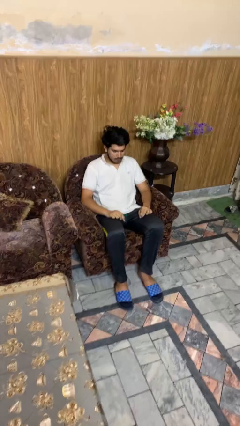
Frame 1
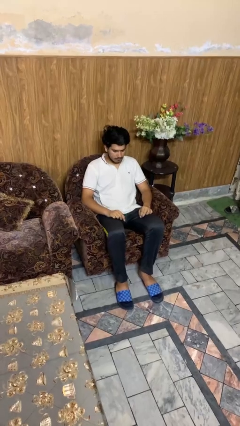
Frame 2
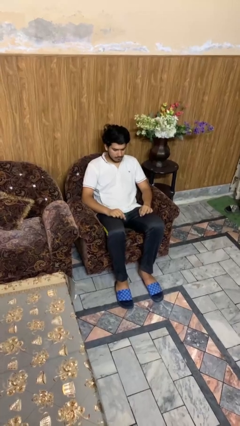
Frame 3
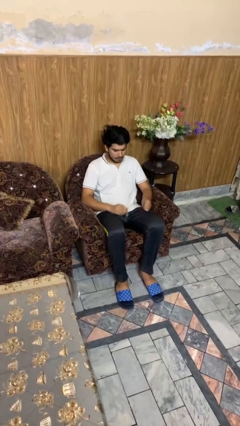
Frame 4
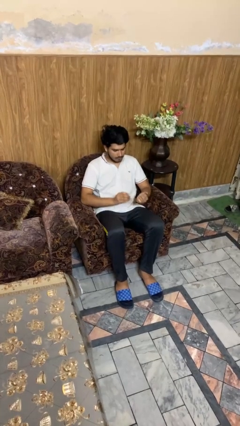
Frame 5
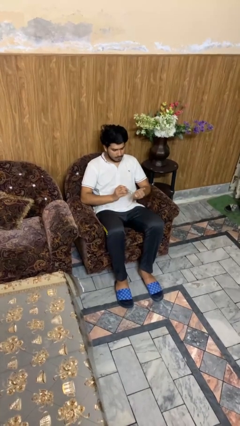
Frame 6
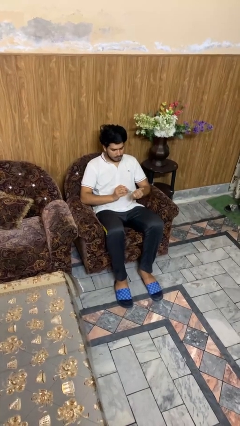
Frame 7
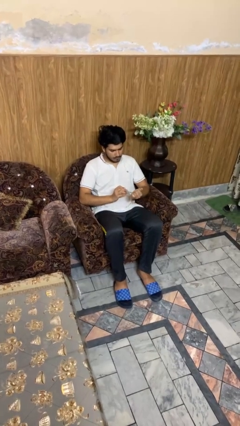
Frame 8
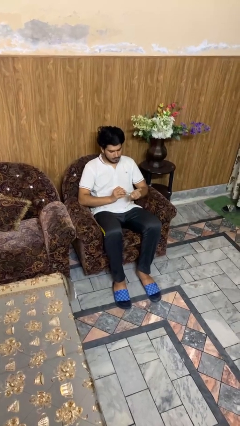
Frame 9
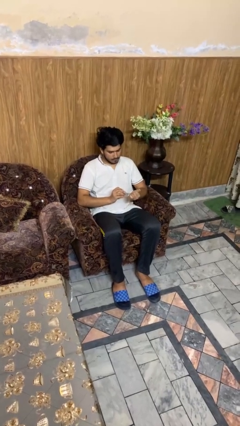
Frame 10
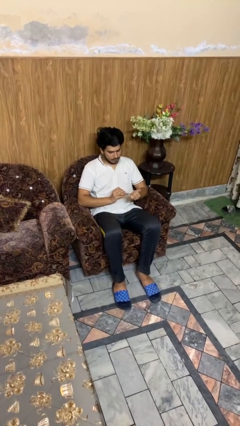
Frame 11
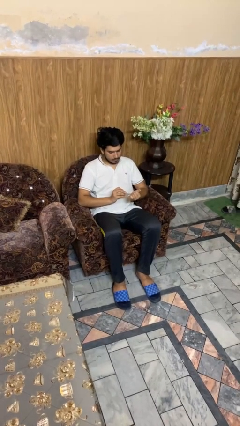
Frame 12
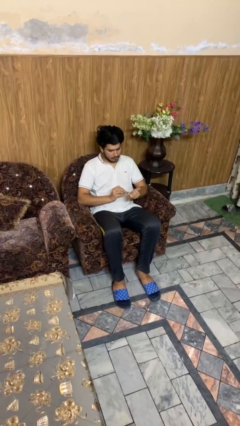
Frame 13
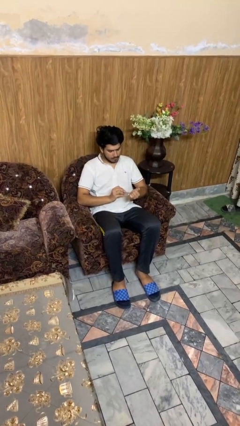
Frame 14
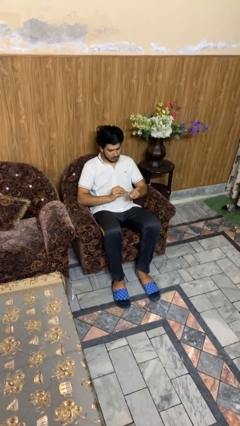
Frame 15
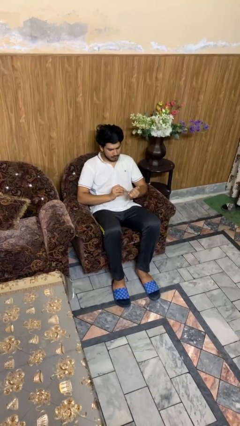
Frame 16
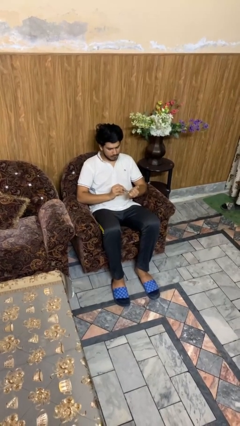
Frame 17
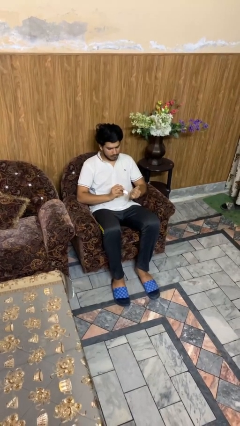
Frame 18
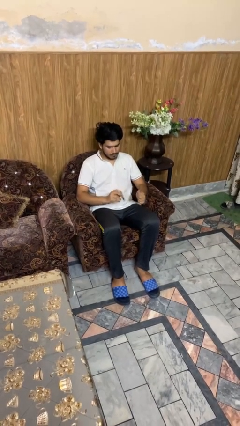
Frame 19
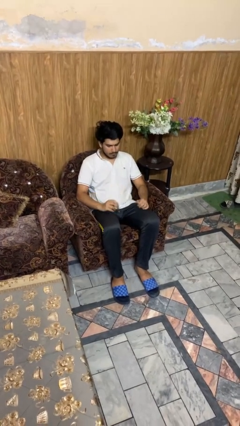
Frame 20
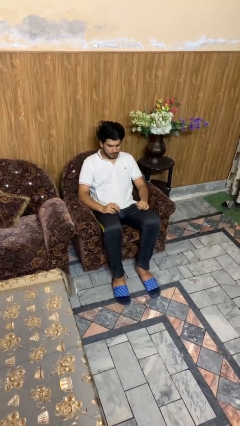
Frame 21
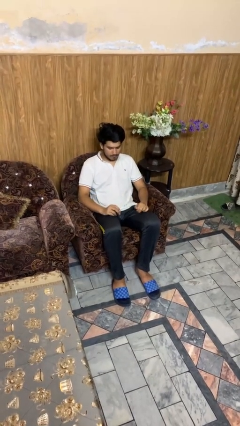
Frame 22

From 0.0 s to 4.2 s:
person clips fingernails

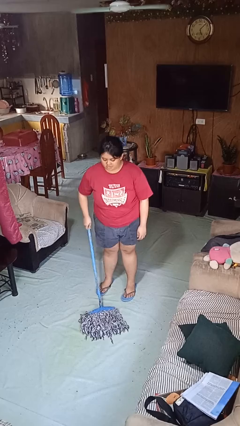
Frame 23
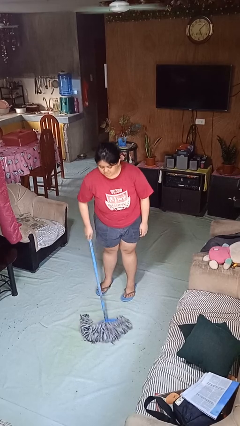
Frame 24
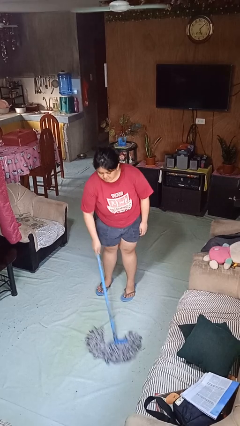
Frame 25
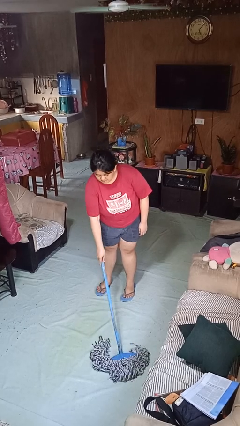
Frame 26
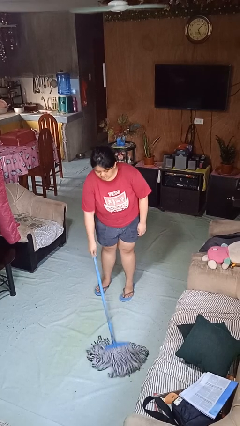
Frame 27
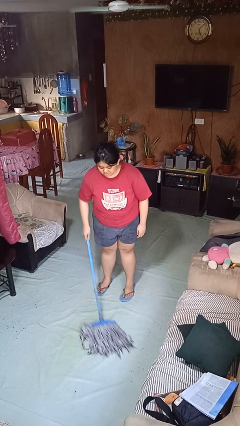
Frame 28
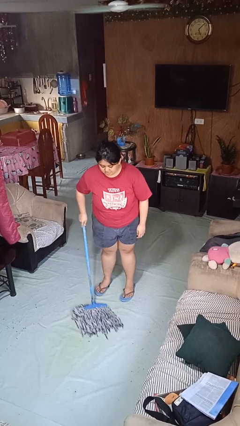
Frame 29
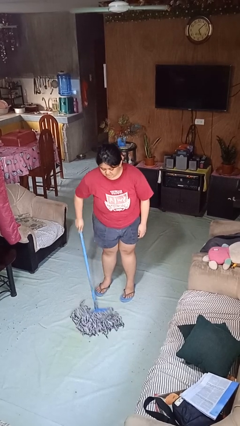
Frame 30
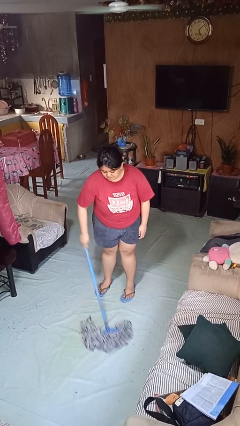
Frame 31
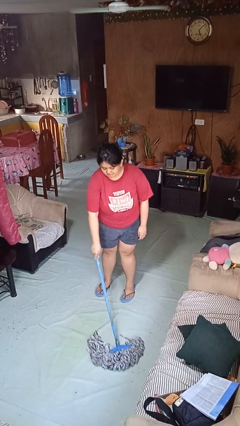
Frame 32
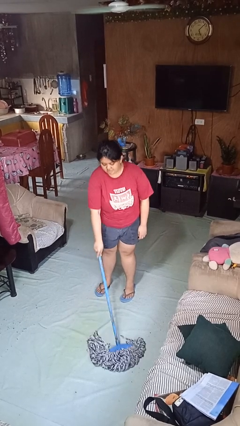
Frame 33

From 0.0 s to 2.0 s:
person mops

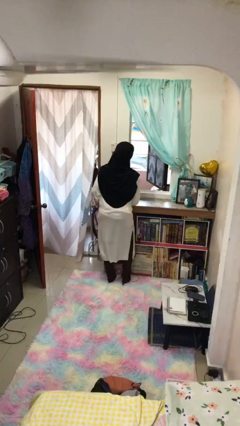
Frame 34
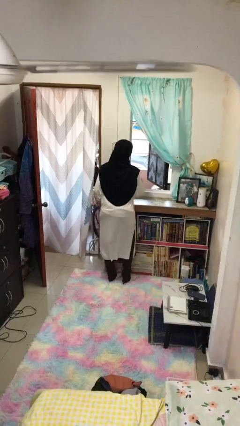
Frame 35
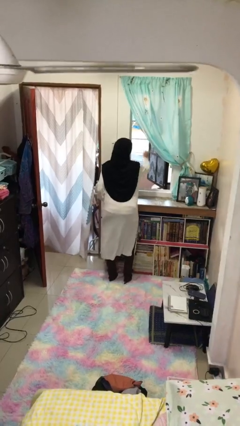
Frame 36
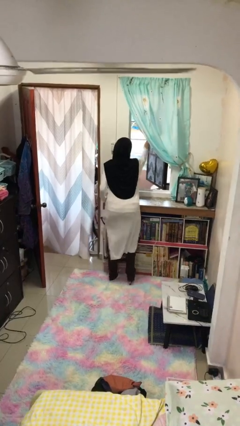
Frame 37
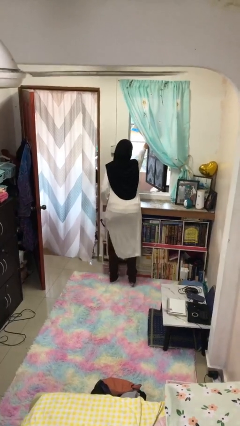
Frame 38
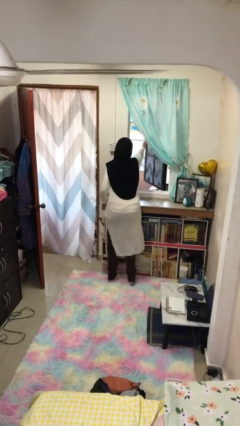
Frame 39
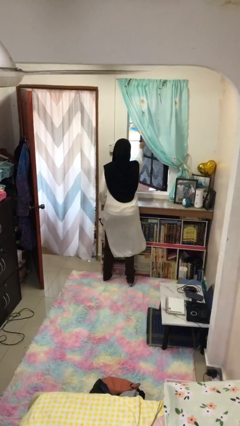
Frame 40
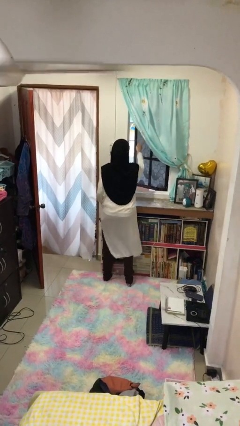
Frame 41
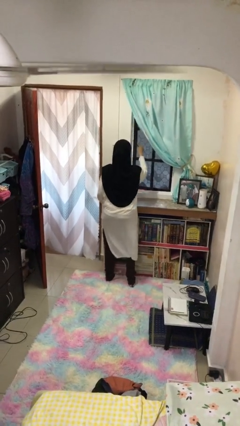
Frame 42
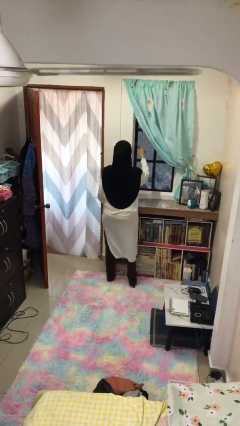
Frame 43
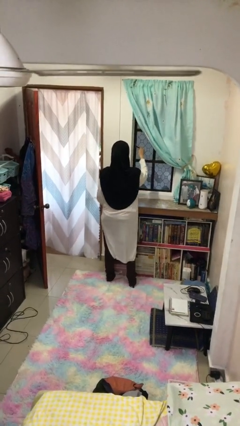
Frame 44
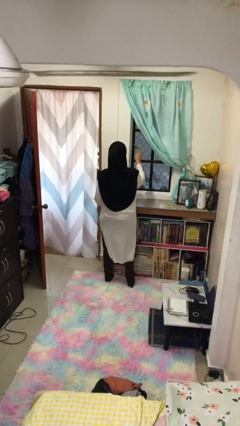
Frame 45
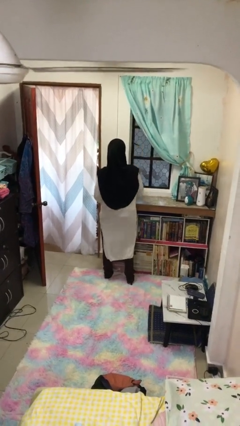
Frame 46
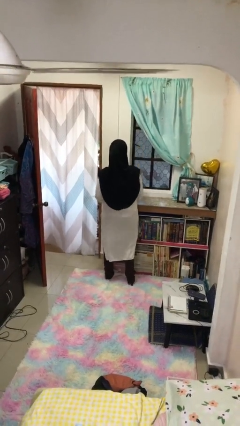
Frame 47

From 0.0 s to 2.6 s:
person closes home window

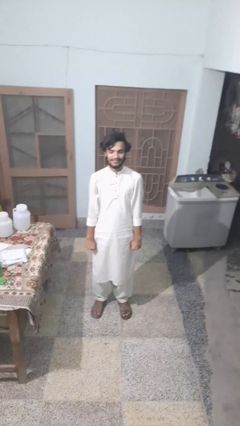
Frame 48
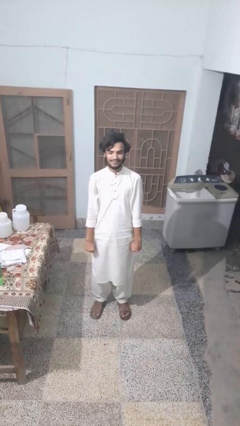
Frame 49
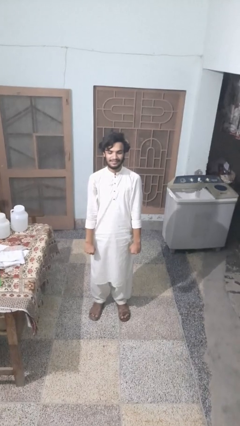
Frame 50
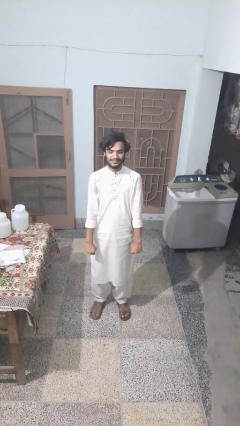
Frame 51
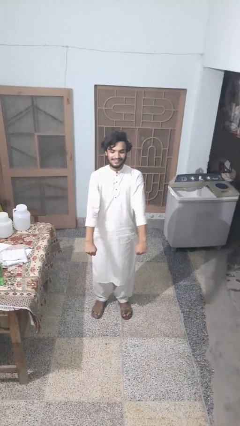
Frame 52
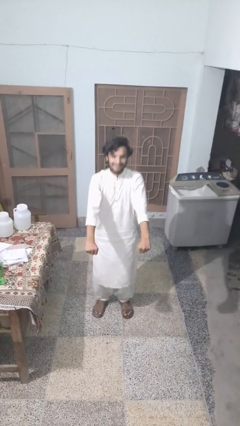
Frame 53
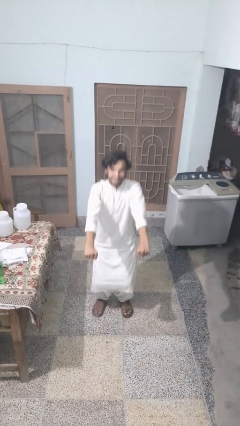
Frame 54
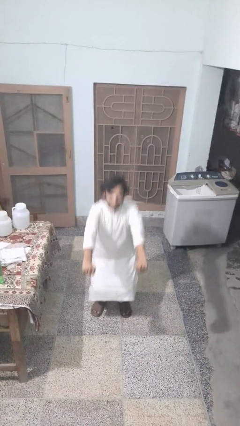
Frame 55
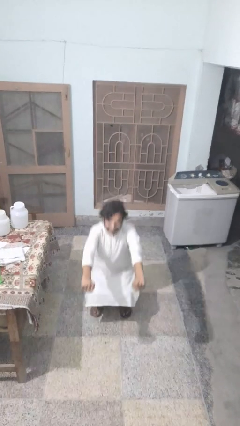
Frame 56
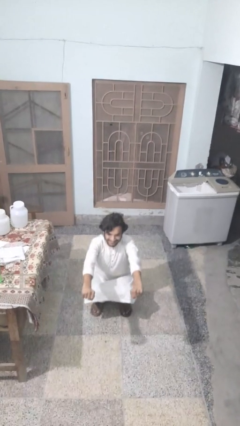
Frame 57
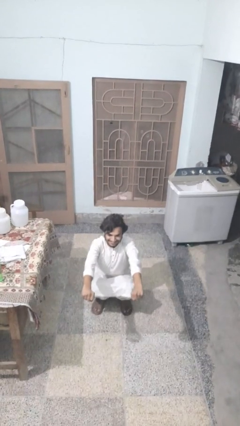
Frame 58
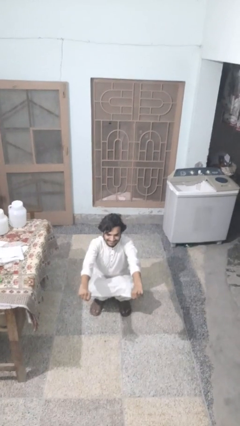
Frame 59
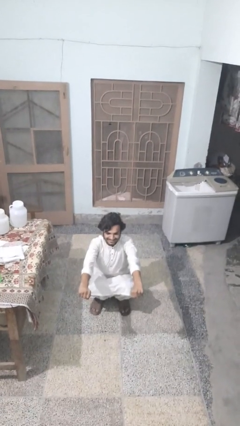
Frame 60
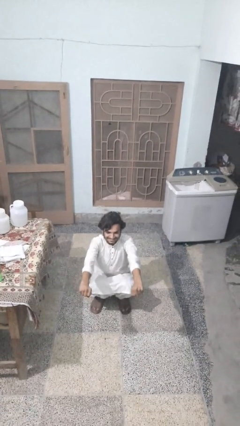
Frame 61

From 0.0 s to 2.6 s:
person squats

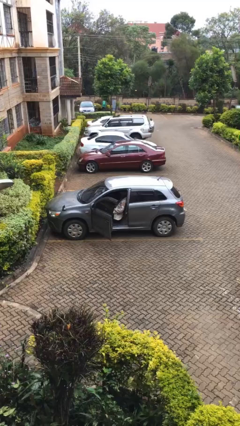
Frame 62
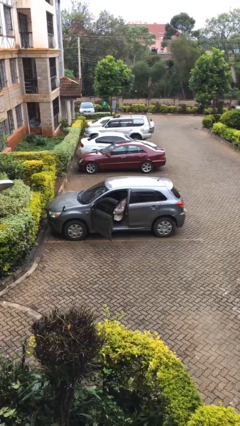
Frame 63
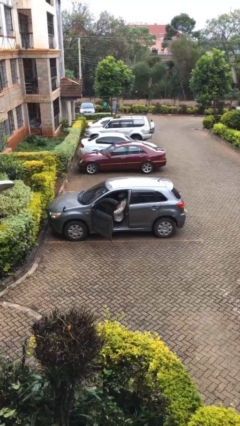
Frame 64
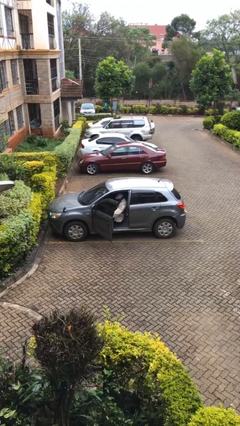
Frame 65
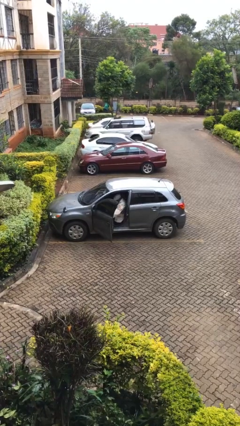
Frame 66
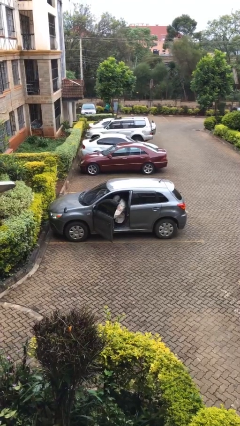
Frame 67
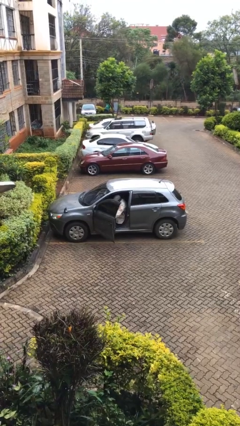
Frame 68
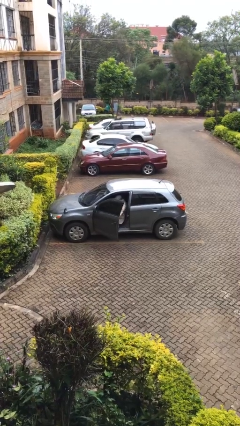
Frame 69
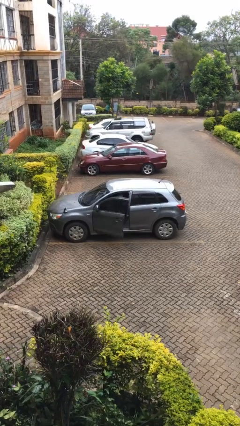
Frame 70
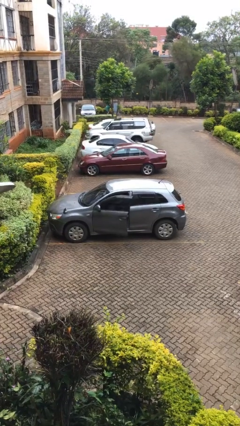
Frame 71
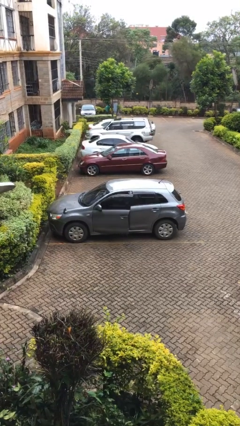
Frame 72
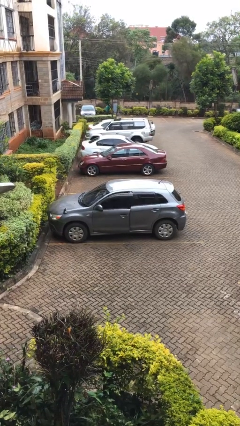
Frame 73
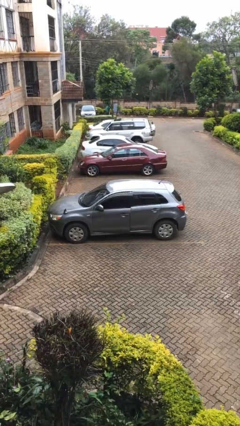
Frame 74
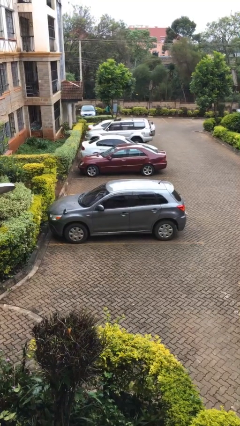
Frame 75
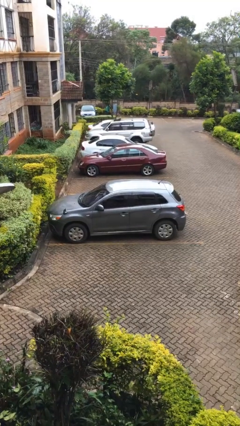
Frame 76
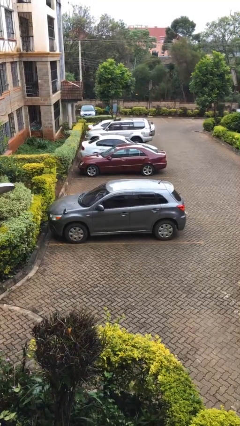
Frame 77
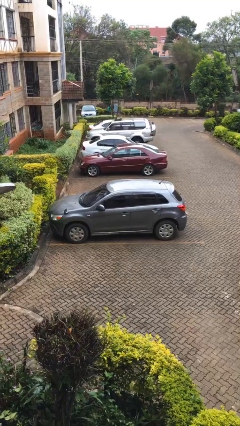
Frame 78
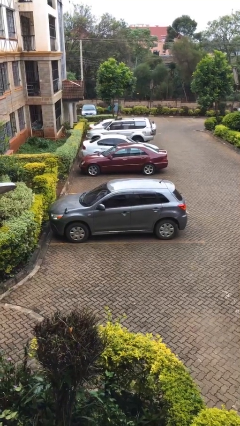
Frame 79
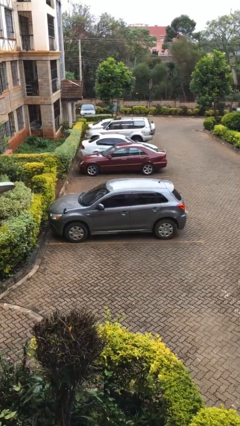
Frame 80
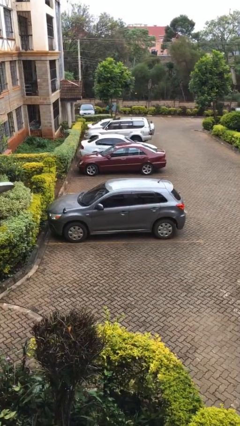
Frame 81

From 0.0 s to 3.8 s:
person closes car door

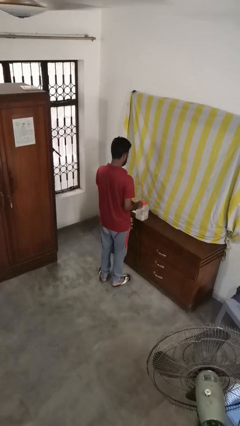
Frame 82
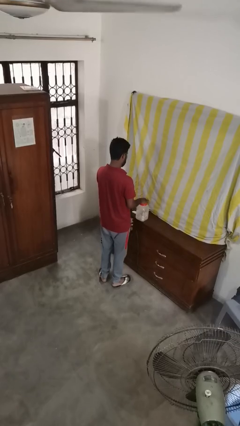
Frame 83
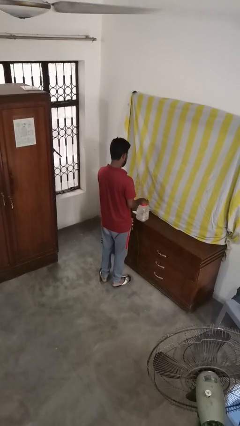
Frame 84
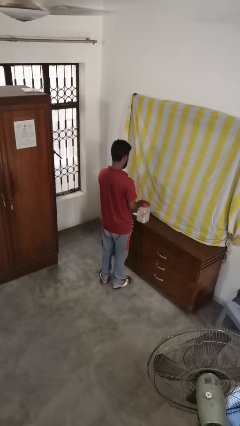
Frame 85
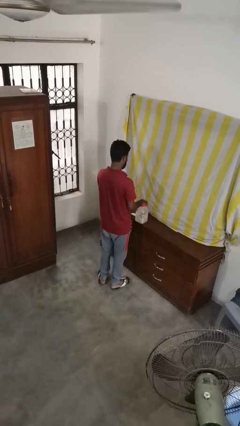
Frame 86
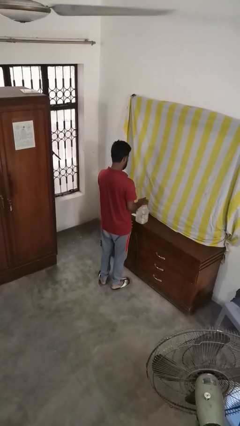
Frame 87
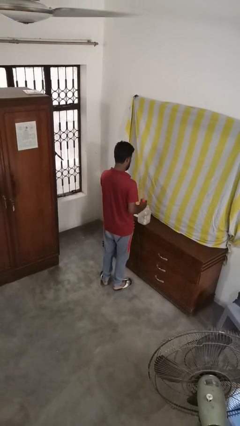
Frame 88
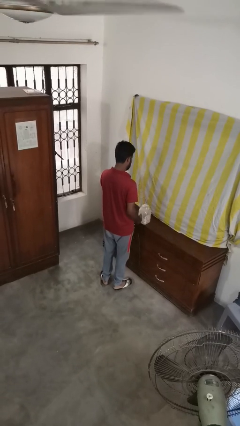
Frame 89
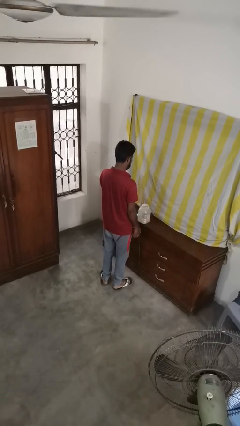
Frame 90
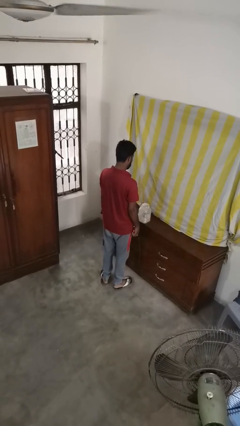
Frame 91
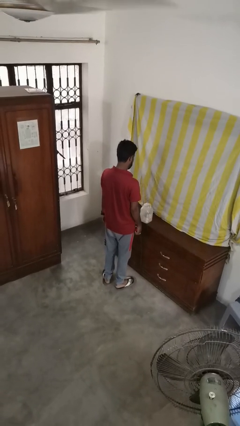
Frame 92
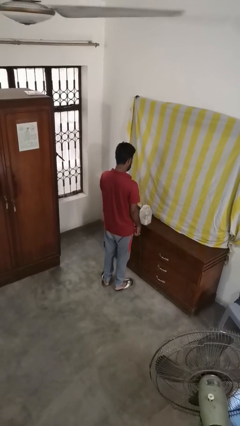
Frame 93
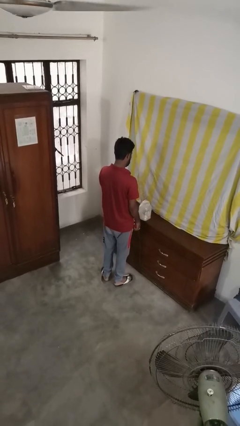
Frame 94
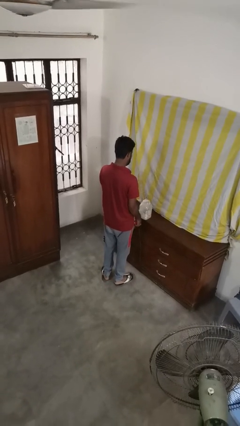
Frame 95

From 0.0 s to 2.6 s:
person opens jar
